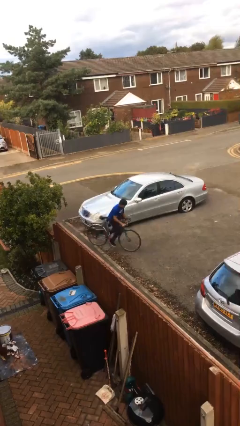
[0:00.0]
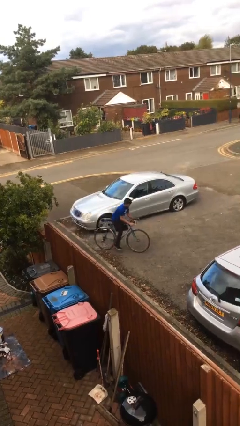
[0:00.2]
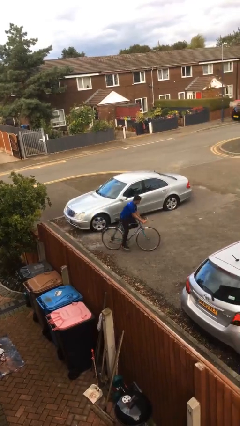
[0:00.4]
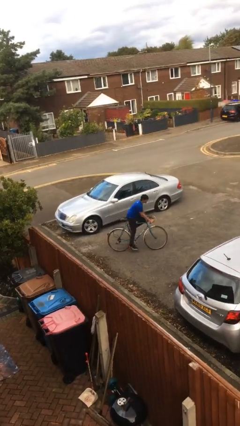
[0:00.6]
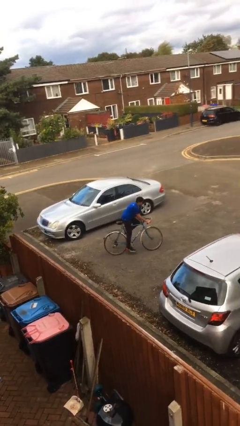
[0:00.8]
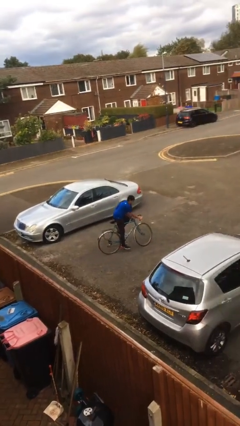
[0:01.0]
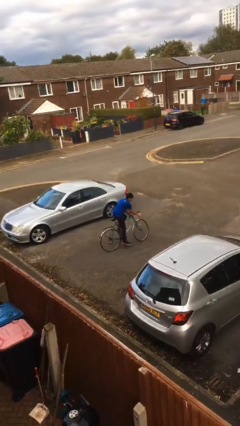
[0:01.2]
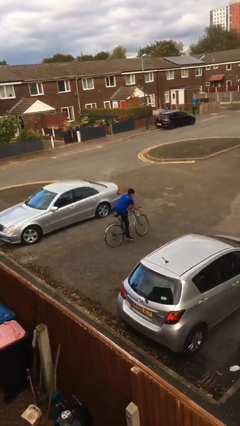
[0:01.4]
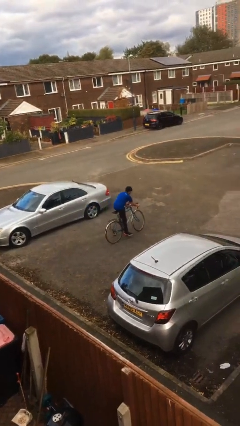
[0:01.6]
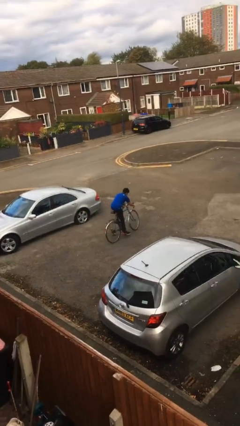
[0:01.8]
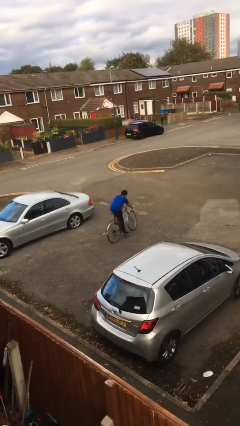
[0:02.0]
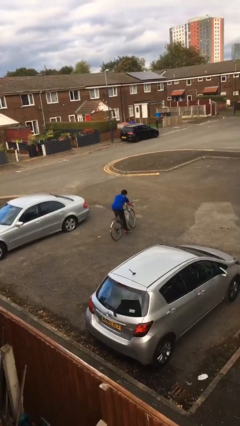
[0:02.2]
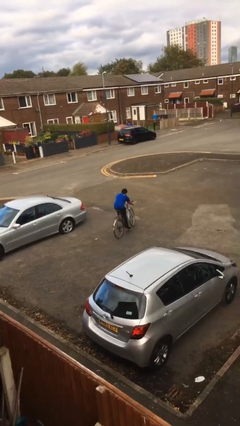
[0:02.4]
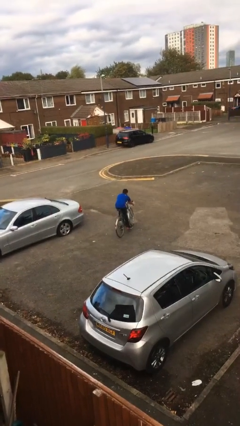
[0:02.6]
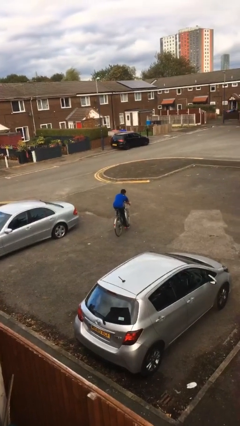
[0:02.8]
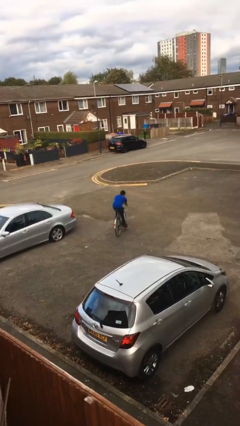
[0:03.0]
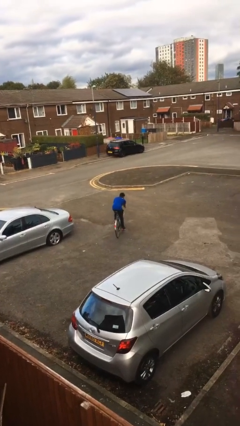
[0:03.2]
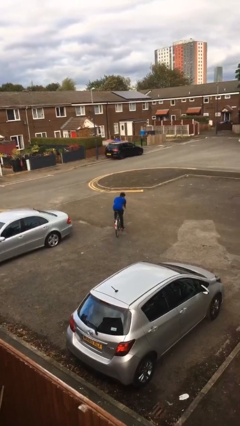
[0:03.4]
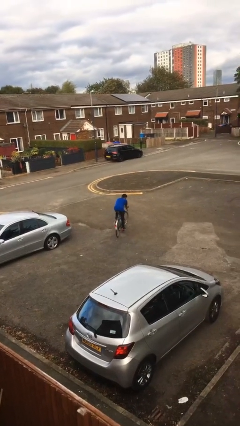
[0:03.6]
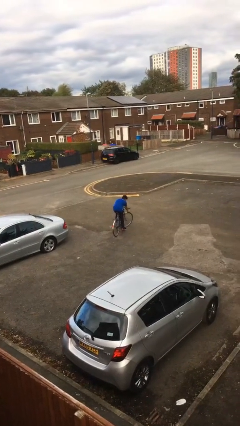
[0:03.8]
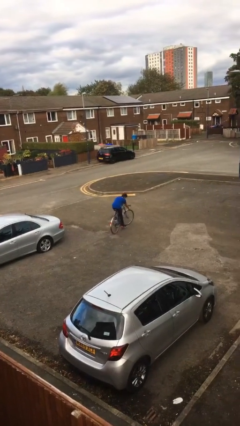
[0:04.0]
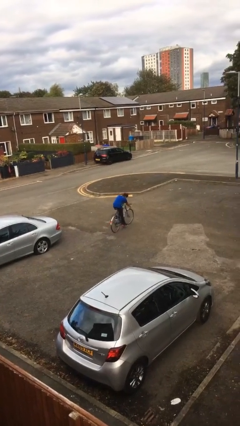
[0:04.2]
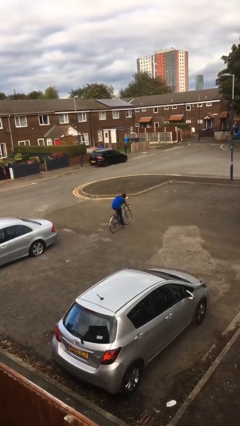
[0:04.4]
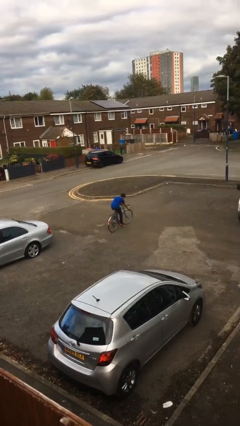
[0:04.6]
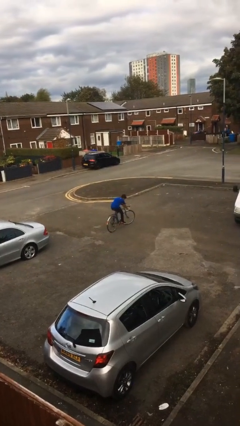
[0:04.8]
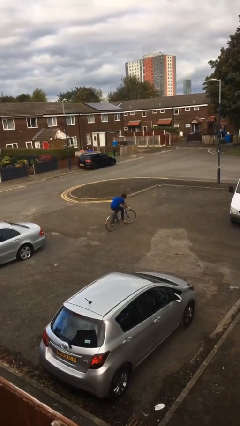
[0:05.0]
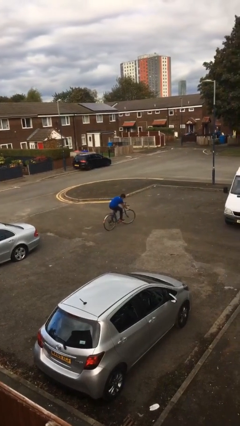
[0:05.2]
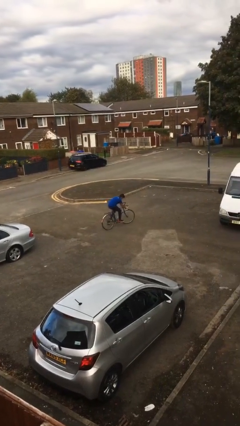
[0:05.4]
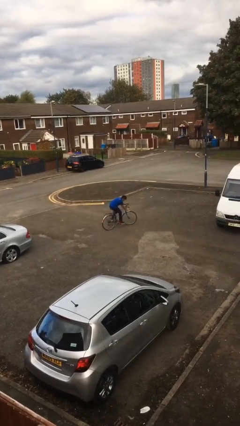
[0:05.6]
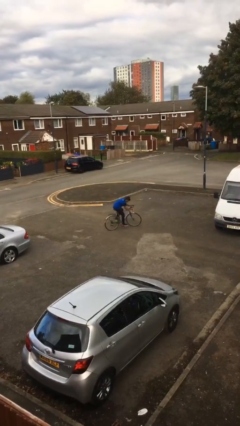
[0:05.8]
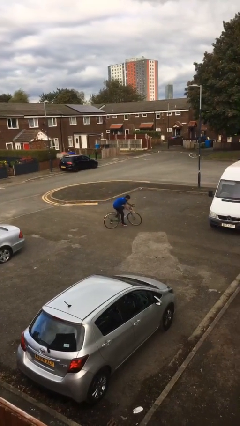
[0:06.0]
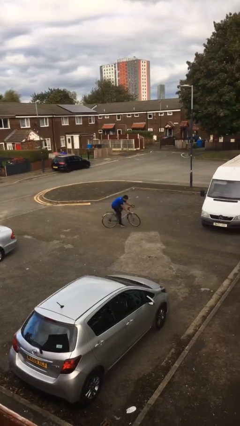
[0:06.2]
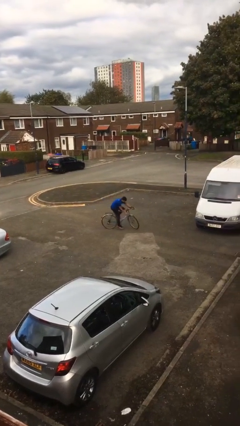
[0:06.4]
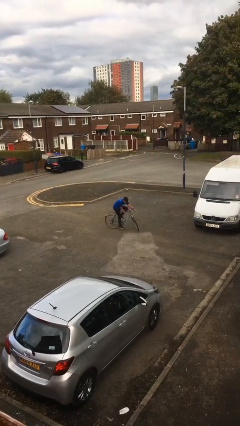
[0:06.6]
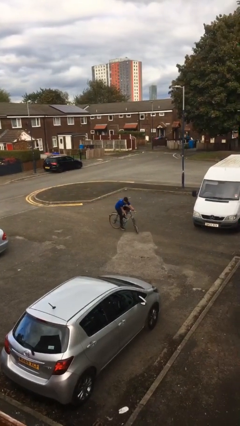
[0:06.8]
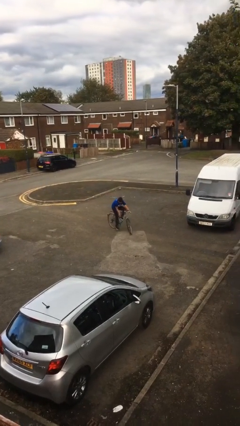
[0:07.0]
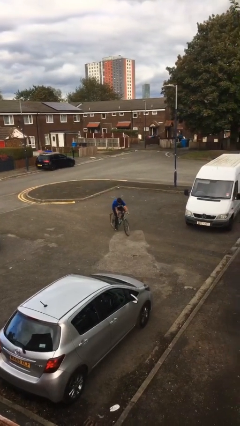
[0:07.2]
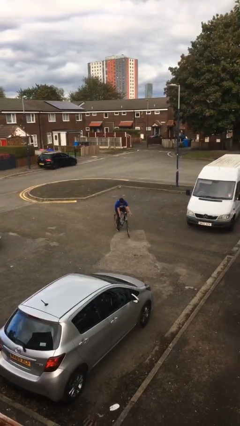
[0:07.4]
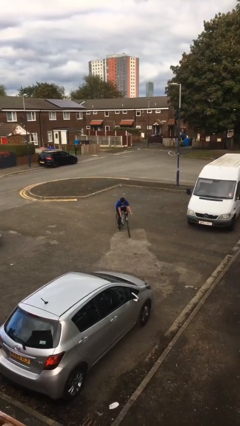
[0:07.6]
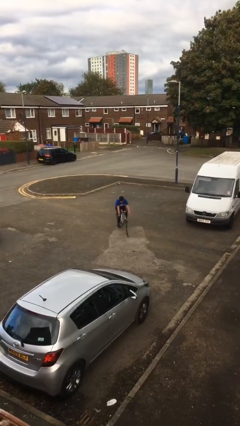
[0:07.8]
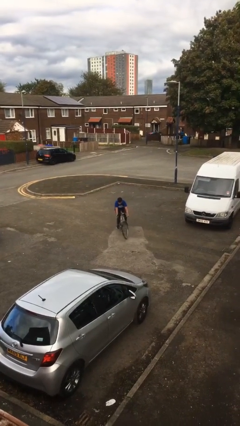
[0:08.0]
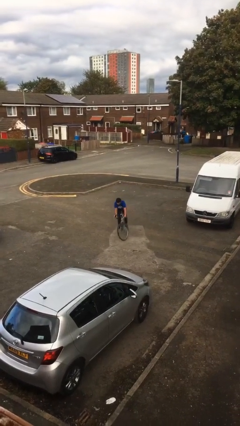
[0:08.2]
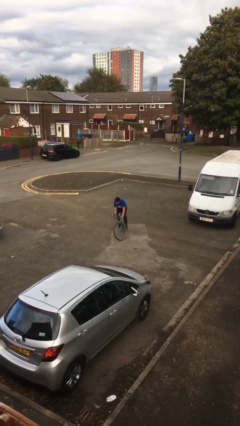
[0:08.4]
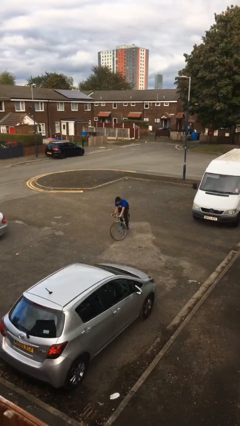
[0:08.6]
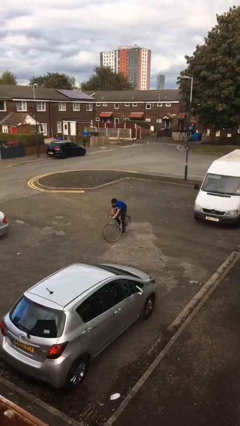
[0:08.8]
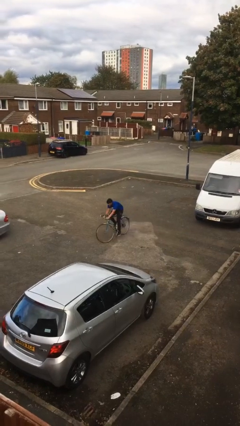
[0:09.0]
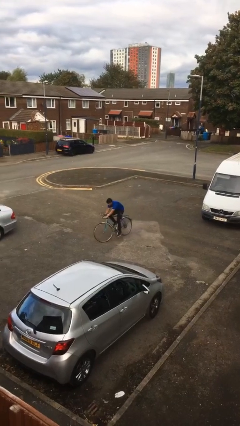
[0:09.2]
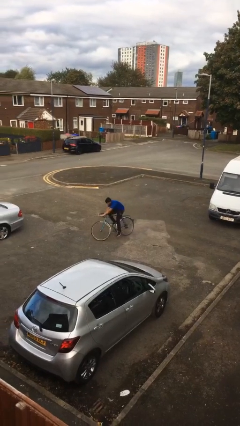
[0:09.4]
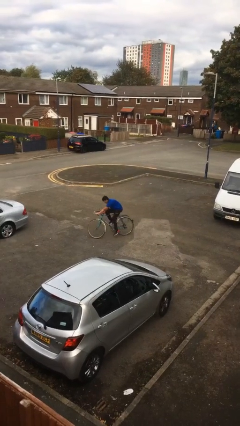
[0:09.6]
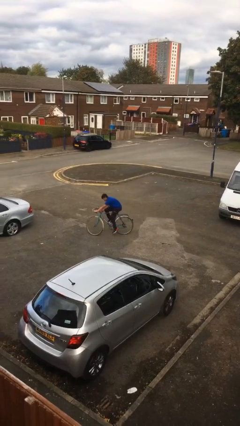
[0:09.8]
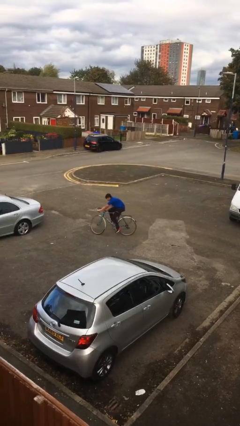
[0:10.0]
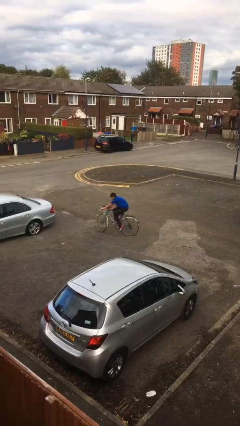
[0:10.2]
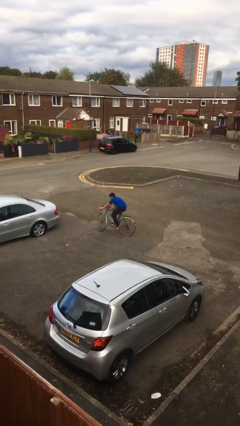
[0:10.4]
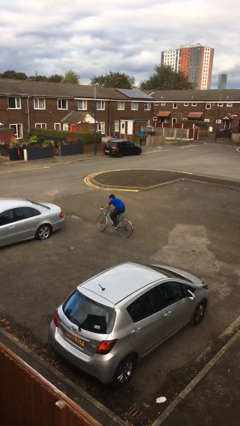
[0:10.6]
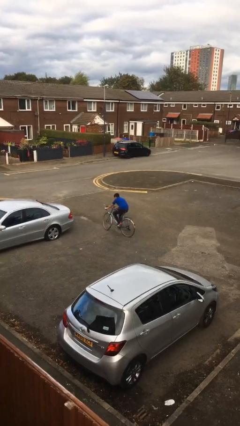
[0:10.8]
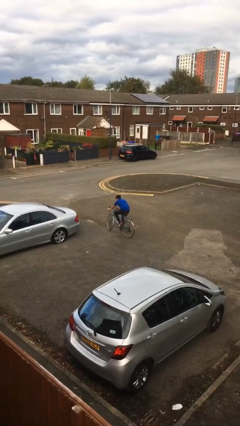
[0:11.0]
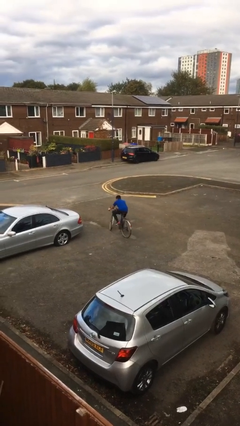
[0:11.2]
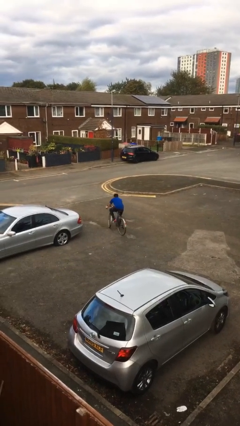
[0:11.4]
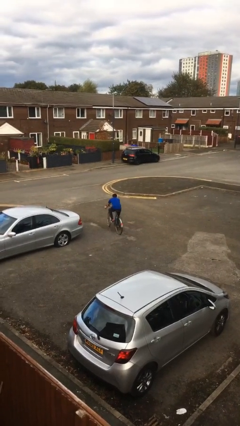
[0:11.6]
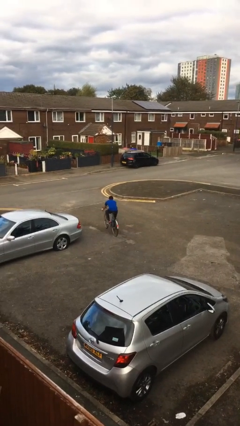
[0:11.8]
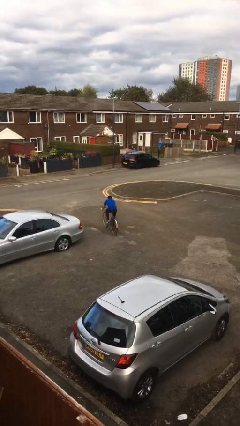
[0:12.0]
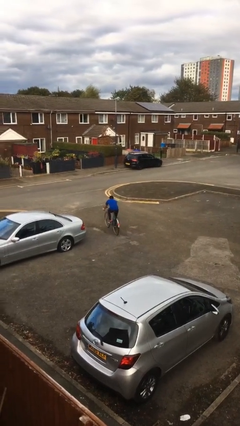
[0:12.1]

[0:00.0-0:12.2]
person rides bicycle

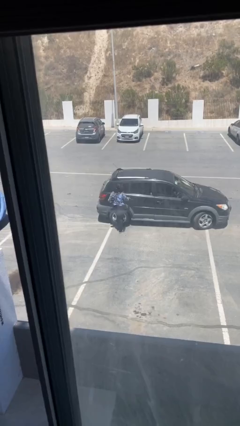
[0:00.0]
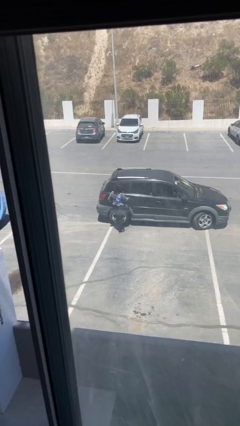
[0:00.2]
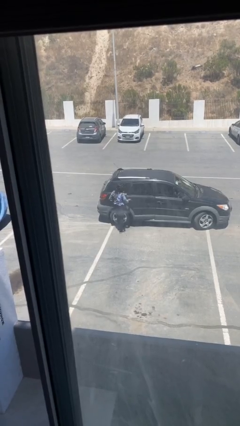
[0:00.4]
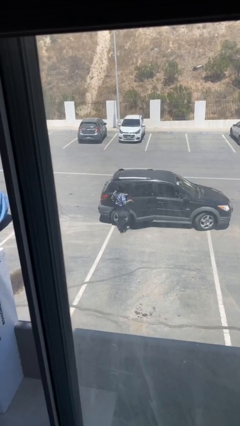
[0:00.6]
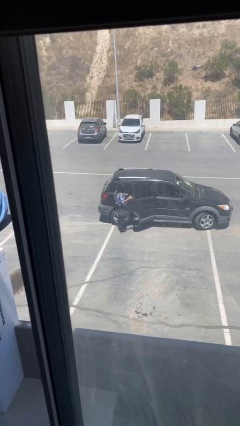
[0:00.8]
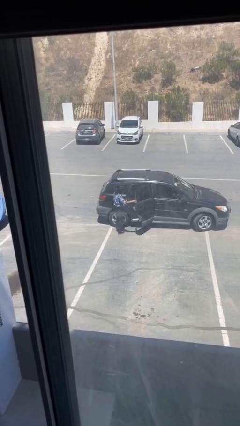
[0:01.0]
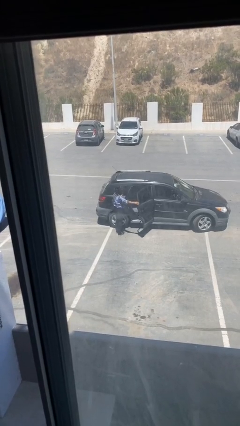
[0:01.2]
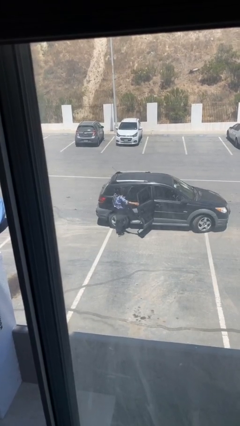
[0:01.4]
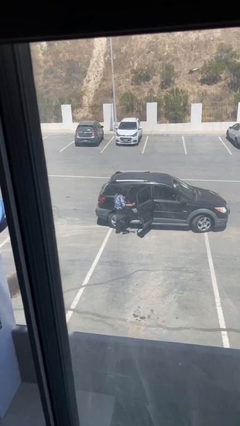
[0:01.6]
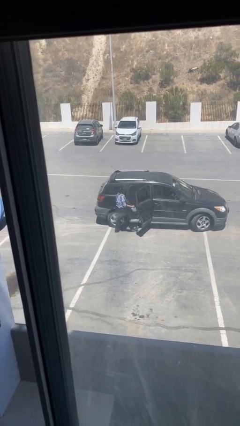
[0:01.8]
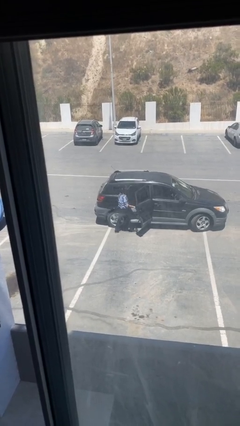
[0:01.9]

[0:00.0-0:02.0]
person opens car door

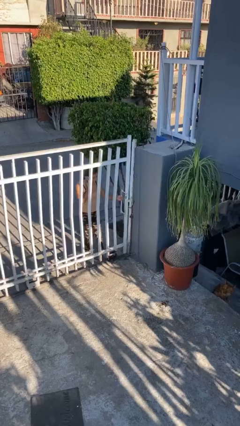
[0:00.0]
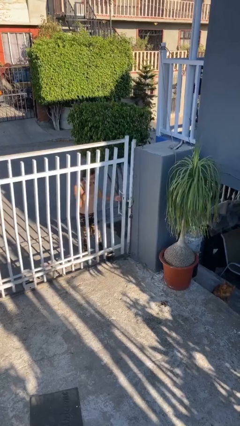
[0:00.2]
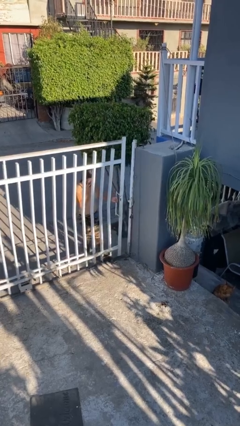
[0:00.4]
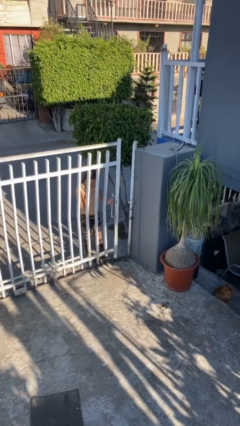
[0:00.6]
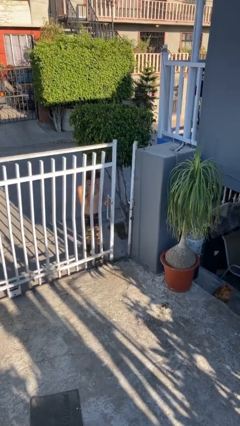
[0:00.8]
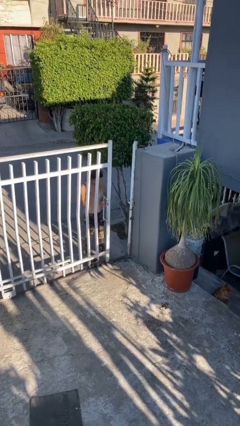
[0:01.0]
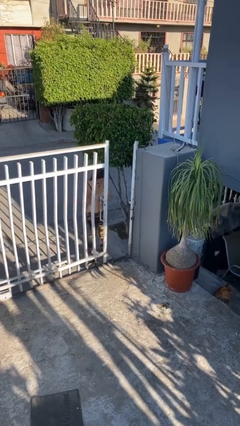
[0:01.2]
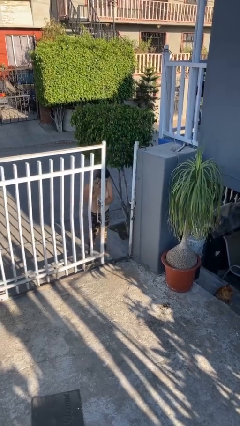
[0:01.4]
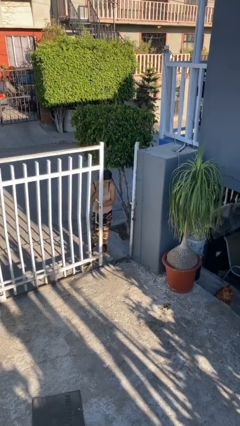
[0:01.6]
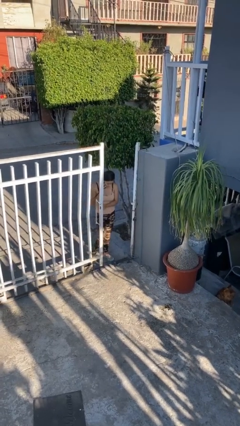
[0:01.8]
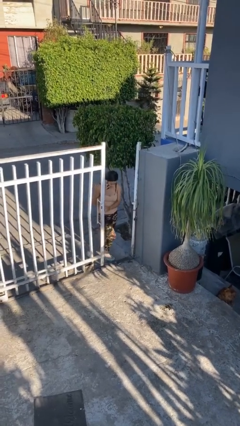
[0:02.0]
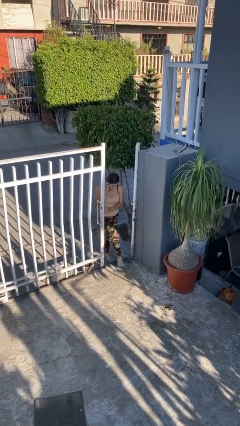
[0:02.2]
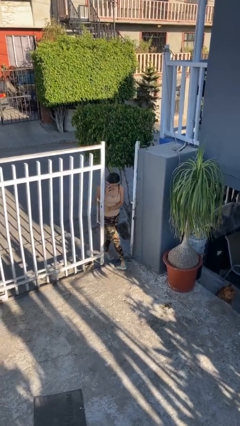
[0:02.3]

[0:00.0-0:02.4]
person opens facility door

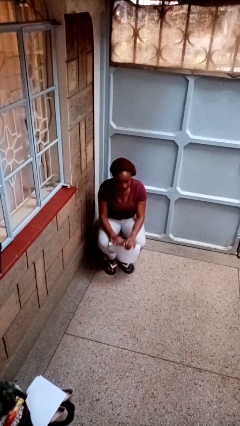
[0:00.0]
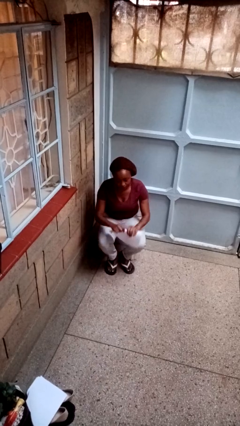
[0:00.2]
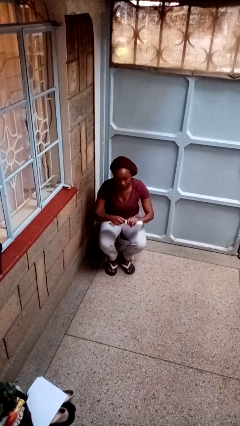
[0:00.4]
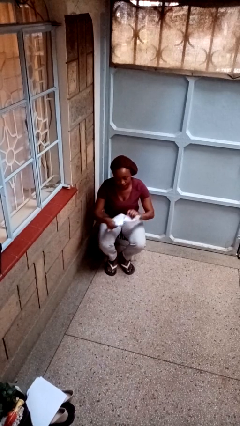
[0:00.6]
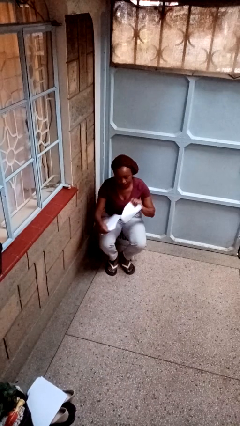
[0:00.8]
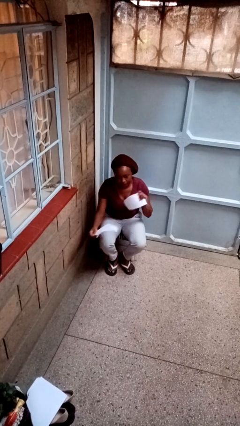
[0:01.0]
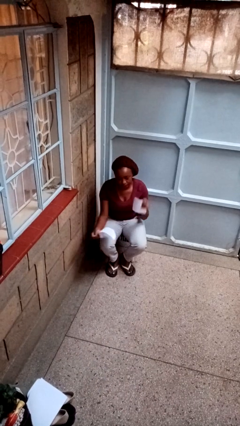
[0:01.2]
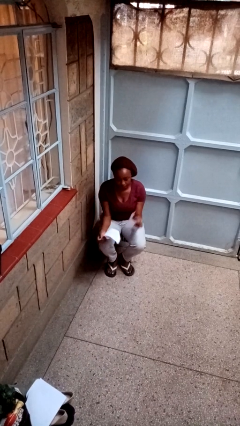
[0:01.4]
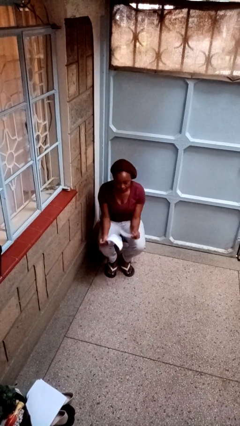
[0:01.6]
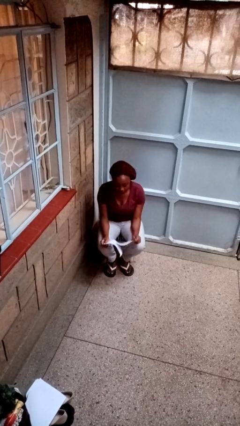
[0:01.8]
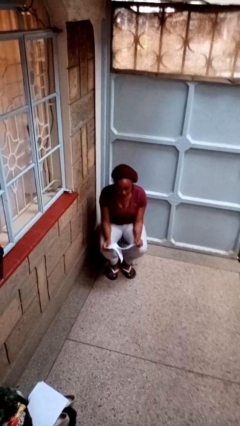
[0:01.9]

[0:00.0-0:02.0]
person tears paper
